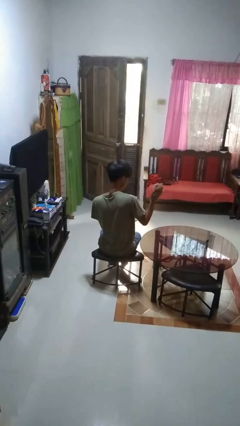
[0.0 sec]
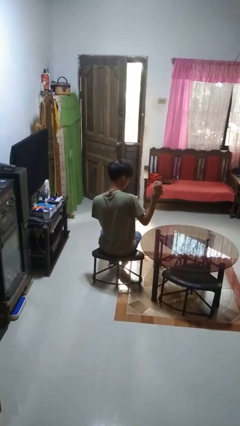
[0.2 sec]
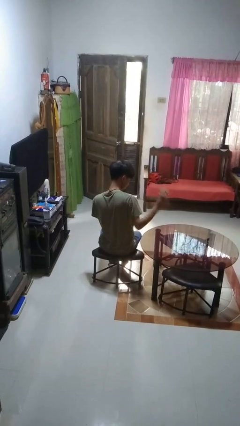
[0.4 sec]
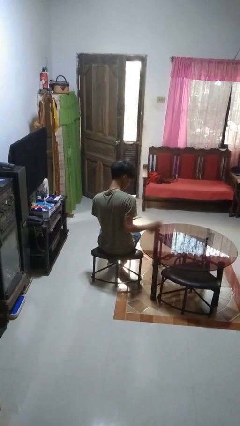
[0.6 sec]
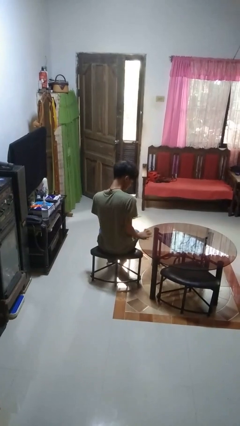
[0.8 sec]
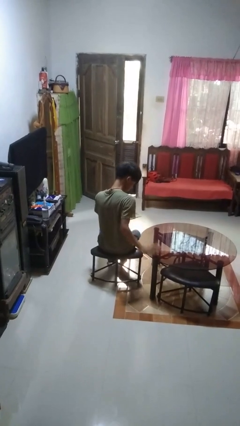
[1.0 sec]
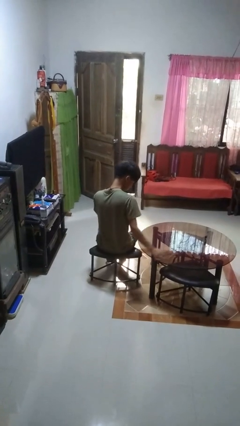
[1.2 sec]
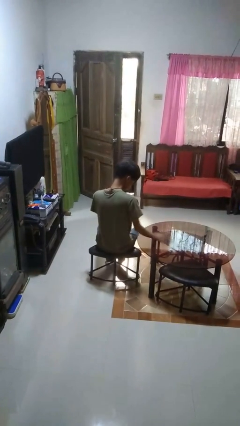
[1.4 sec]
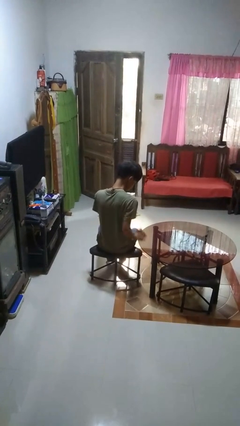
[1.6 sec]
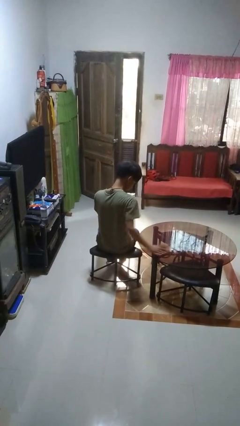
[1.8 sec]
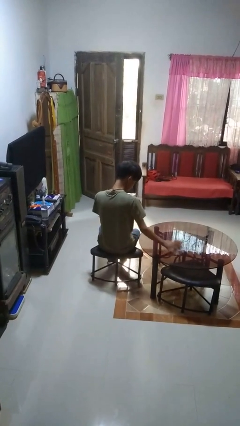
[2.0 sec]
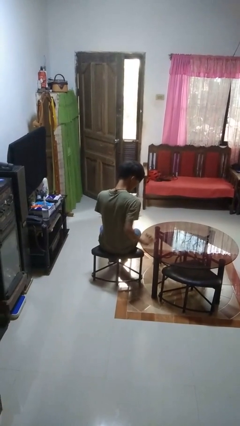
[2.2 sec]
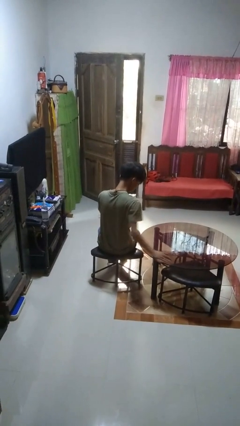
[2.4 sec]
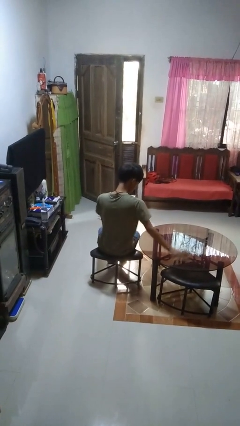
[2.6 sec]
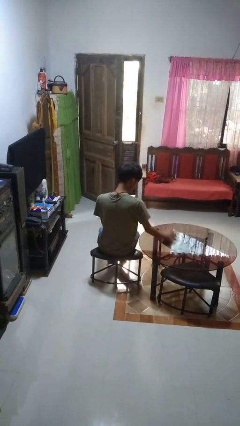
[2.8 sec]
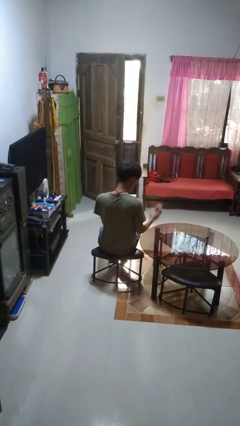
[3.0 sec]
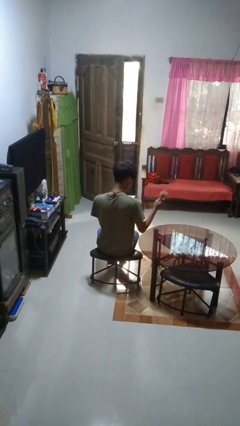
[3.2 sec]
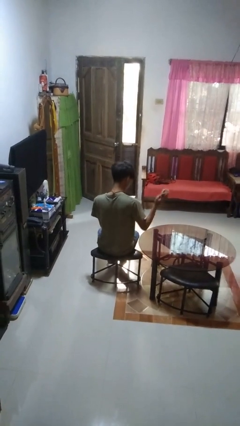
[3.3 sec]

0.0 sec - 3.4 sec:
person cleans table with rag

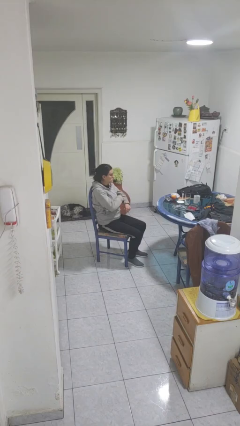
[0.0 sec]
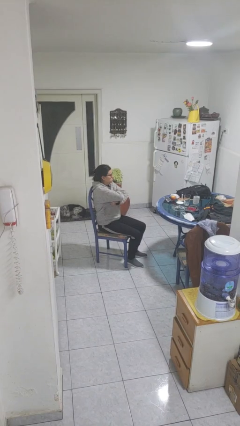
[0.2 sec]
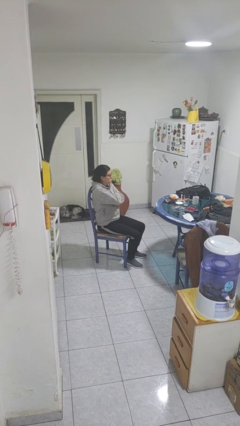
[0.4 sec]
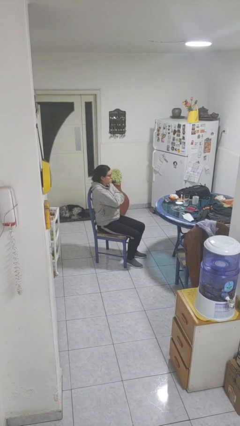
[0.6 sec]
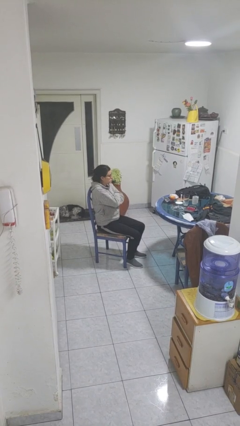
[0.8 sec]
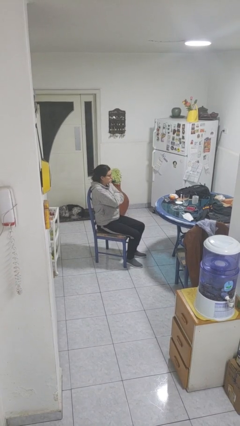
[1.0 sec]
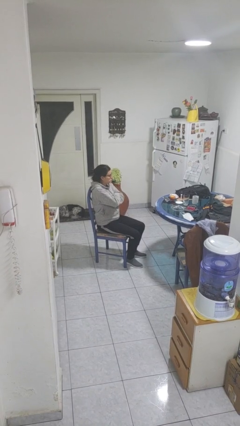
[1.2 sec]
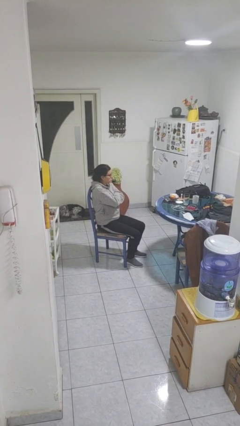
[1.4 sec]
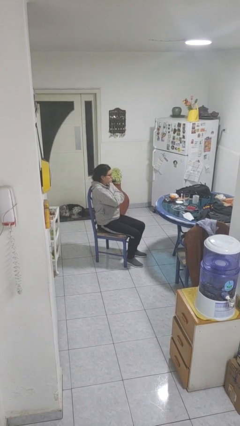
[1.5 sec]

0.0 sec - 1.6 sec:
person crosses arms

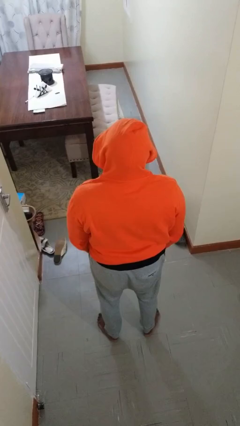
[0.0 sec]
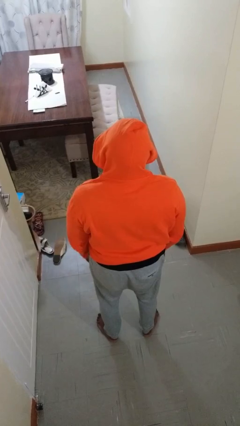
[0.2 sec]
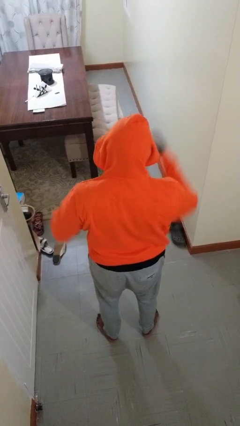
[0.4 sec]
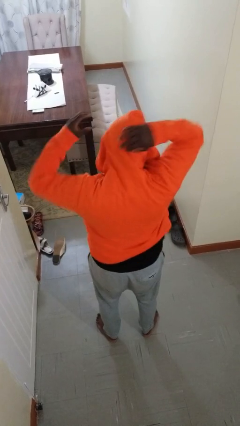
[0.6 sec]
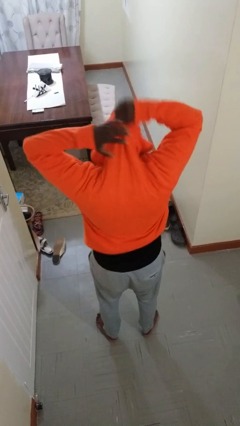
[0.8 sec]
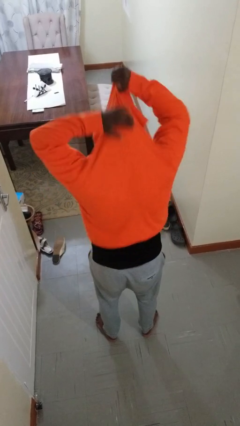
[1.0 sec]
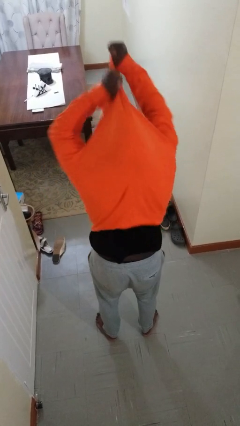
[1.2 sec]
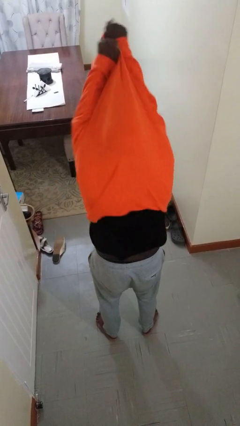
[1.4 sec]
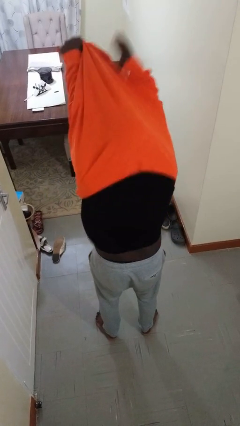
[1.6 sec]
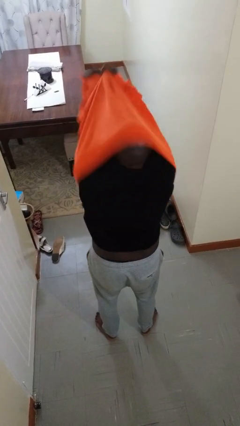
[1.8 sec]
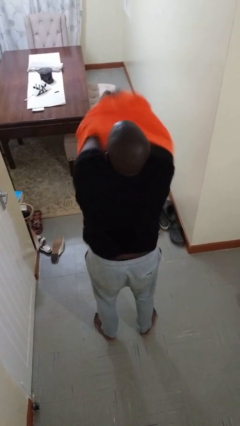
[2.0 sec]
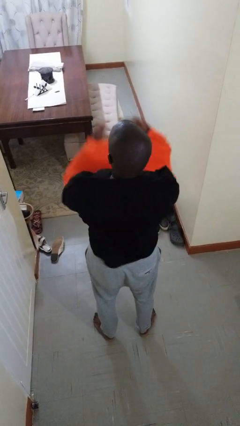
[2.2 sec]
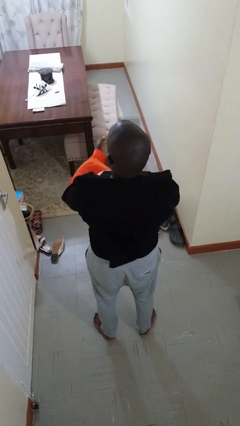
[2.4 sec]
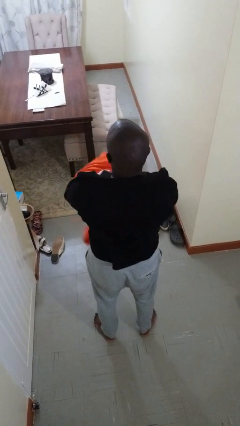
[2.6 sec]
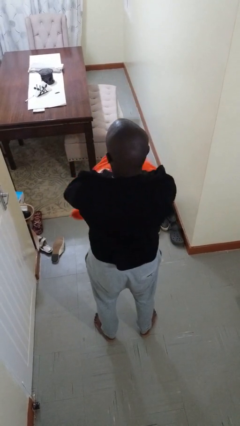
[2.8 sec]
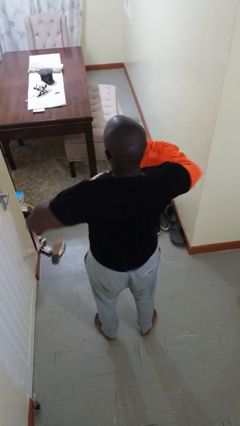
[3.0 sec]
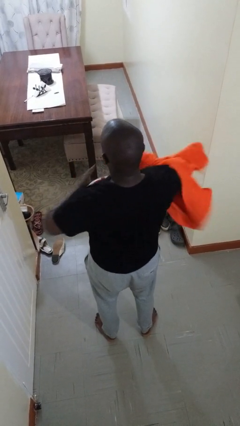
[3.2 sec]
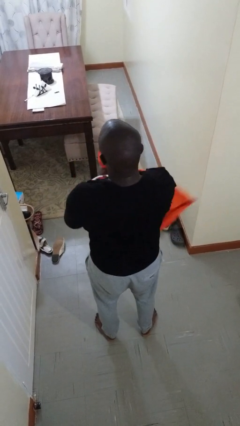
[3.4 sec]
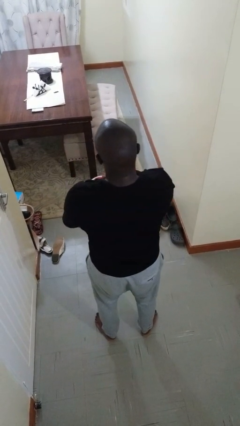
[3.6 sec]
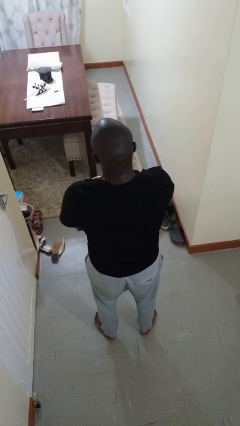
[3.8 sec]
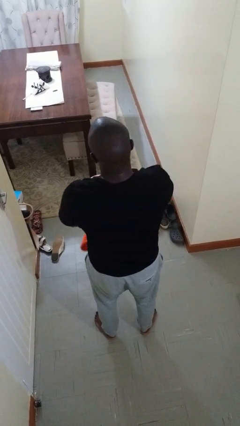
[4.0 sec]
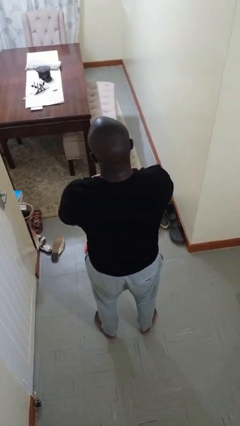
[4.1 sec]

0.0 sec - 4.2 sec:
person takes off hoodie

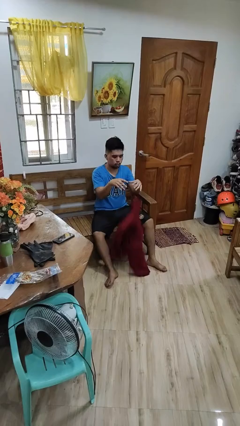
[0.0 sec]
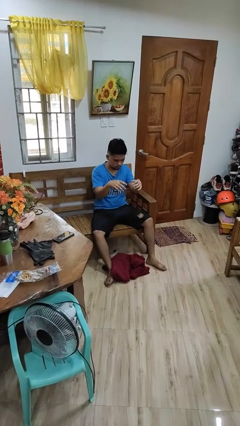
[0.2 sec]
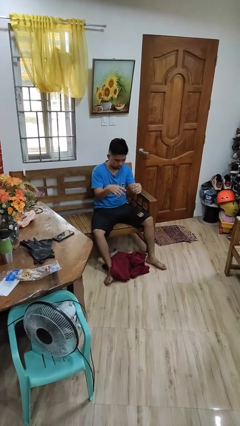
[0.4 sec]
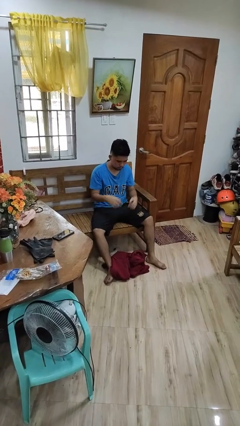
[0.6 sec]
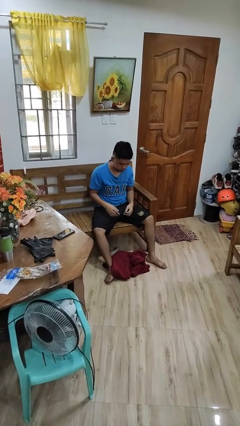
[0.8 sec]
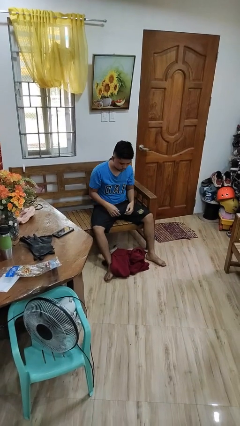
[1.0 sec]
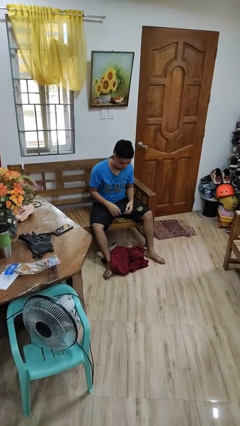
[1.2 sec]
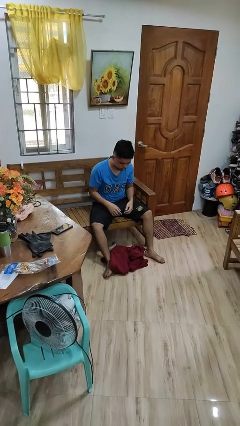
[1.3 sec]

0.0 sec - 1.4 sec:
person drops object

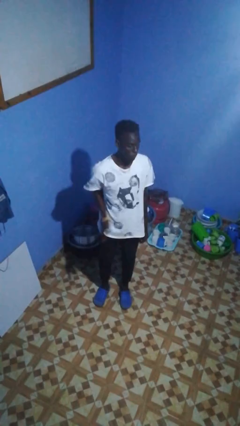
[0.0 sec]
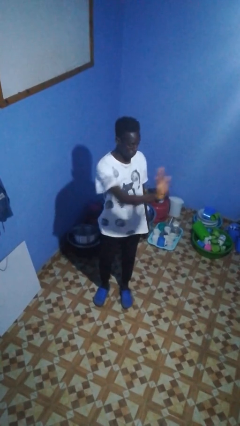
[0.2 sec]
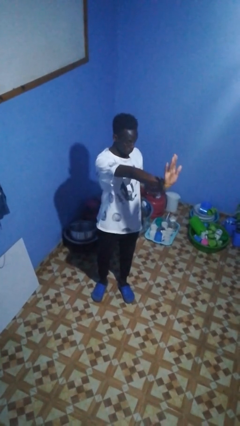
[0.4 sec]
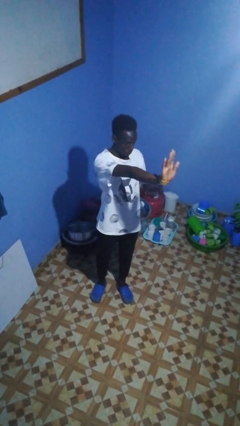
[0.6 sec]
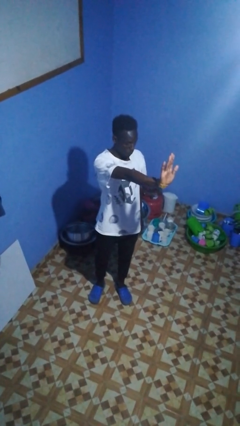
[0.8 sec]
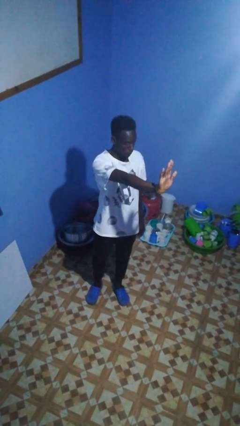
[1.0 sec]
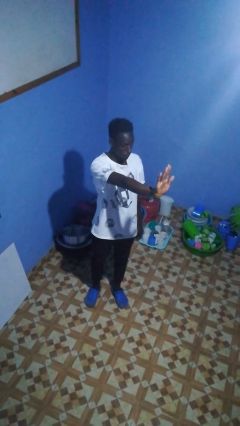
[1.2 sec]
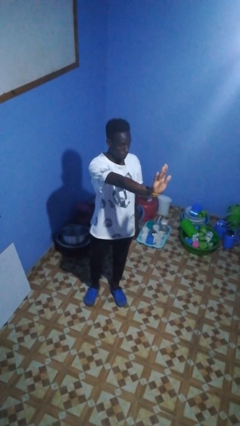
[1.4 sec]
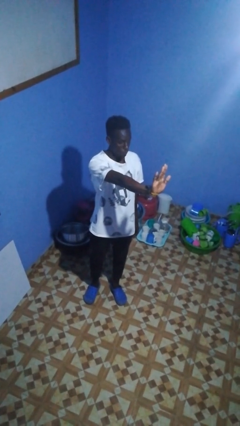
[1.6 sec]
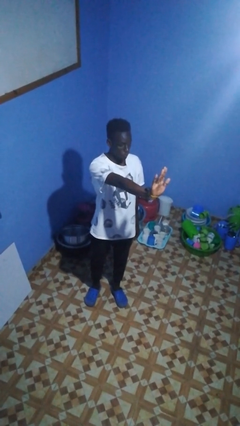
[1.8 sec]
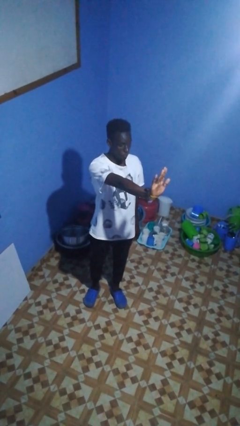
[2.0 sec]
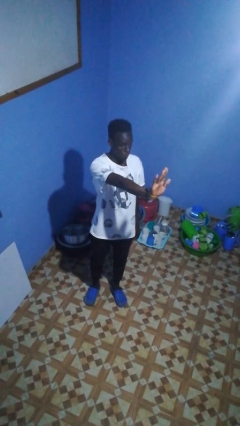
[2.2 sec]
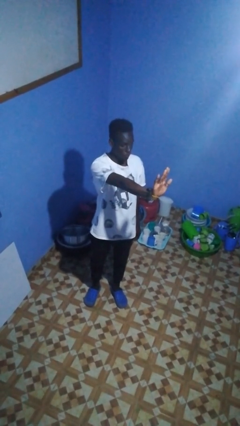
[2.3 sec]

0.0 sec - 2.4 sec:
person gestures stop

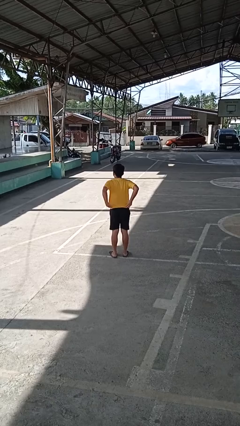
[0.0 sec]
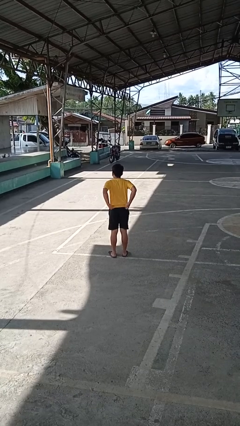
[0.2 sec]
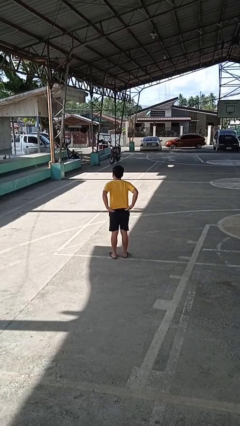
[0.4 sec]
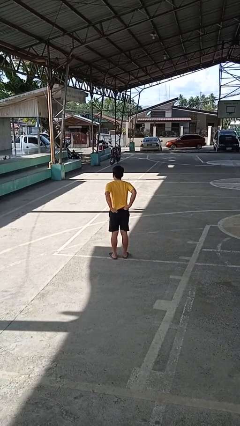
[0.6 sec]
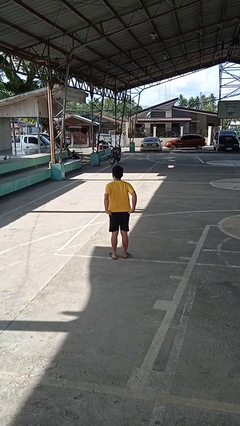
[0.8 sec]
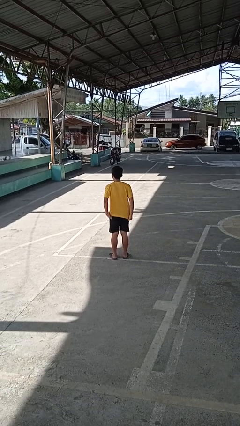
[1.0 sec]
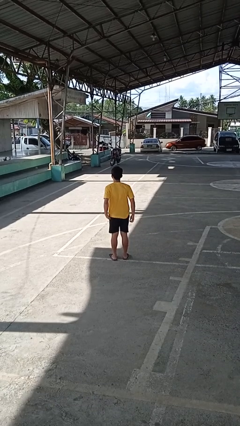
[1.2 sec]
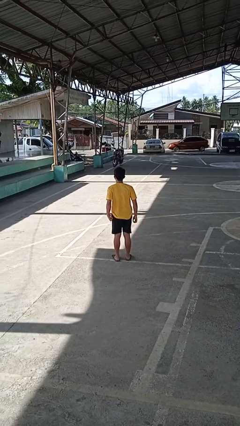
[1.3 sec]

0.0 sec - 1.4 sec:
person untucks shirt

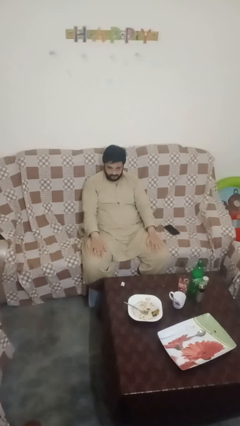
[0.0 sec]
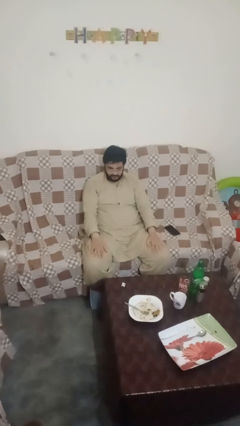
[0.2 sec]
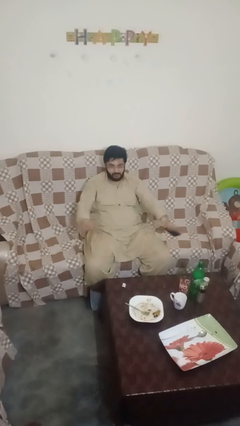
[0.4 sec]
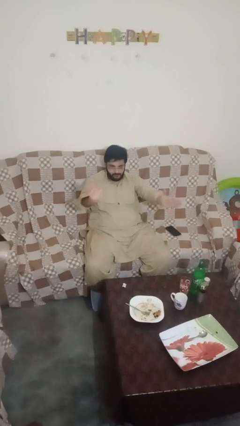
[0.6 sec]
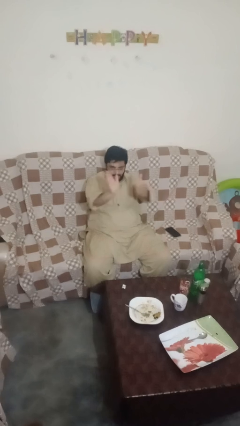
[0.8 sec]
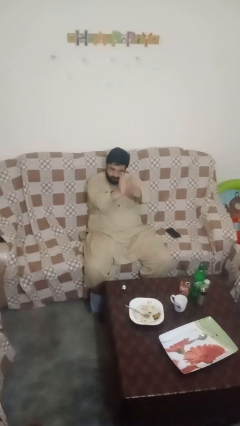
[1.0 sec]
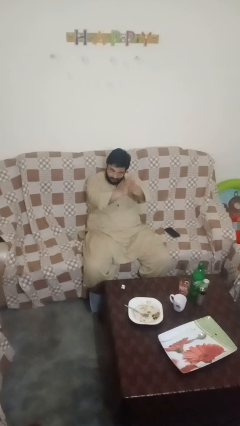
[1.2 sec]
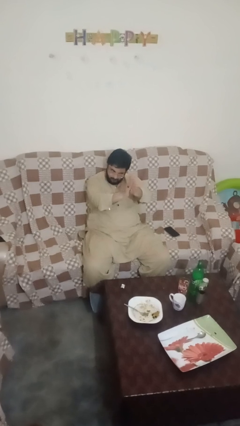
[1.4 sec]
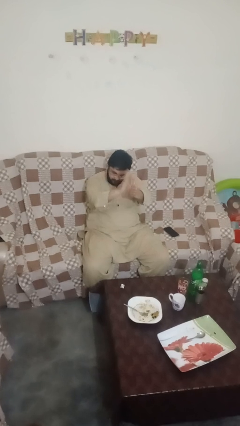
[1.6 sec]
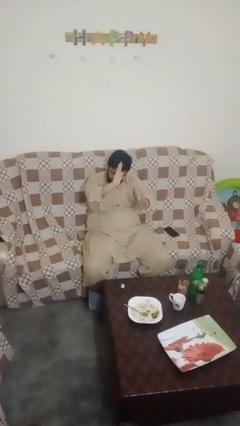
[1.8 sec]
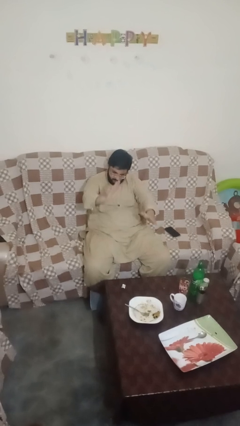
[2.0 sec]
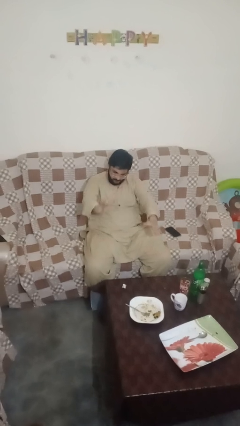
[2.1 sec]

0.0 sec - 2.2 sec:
person claps hands
